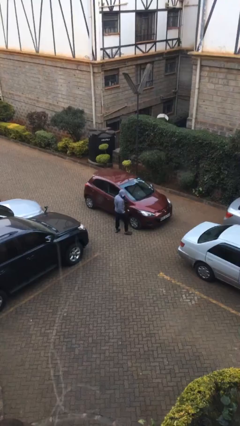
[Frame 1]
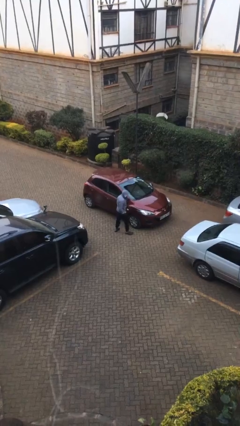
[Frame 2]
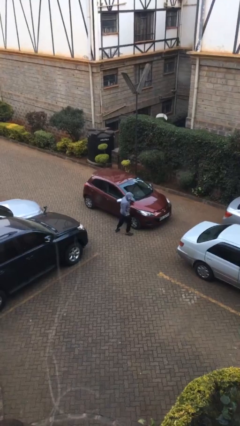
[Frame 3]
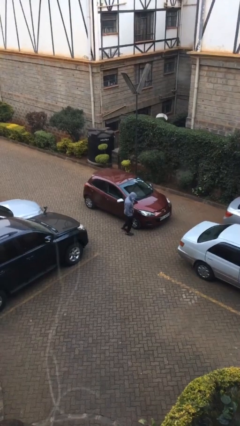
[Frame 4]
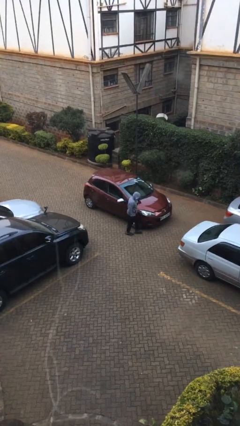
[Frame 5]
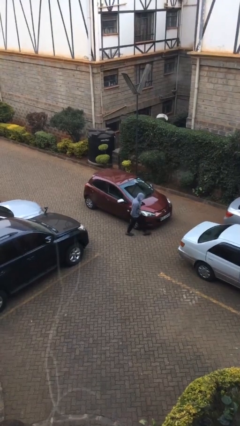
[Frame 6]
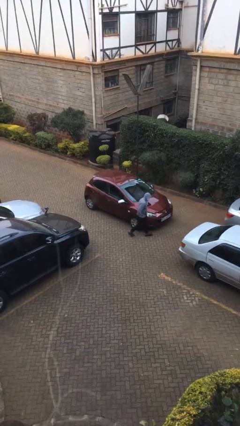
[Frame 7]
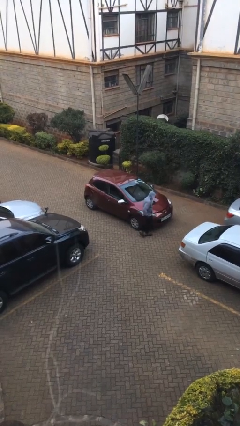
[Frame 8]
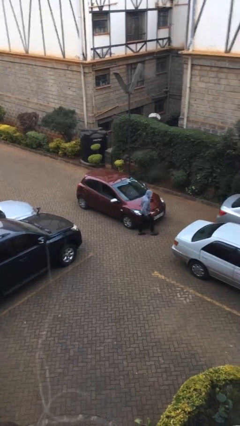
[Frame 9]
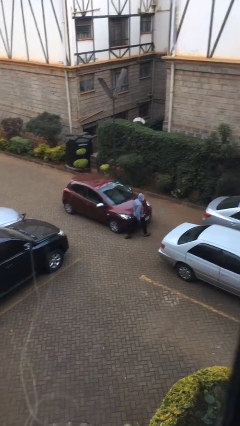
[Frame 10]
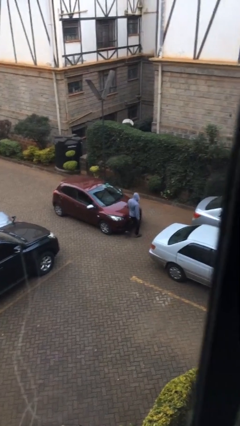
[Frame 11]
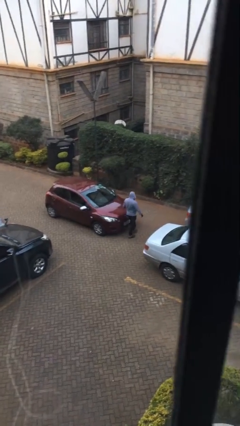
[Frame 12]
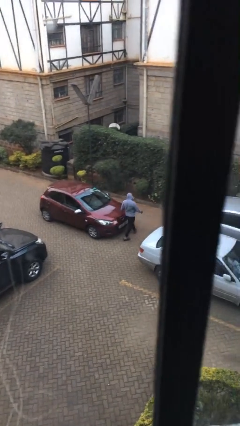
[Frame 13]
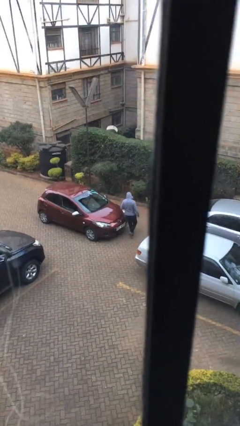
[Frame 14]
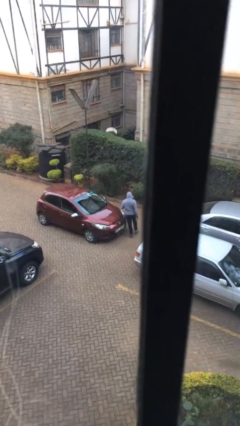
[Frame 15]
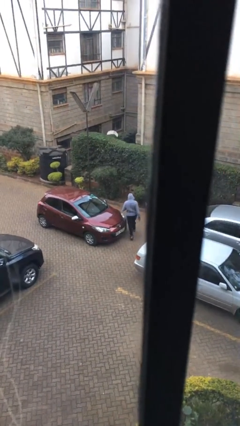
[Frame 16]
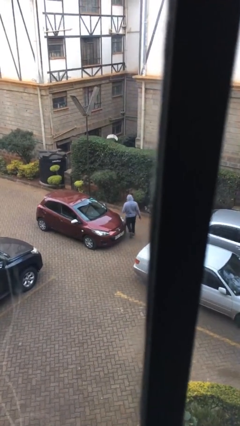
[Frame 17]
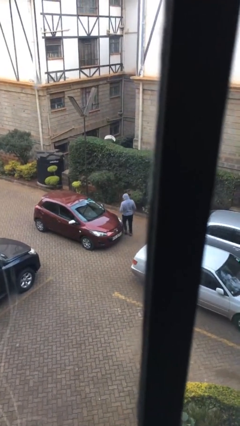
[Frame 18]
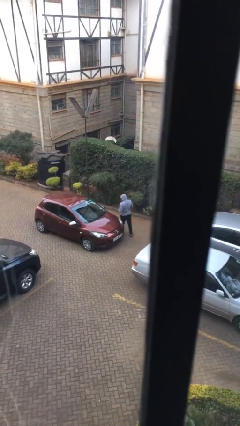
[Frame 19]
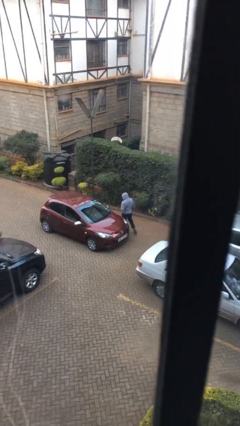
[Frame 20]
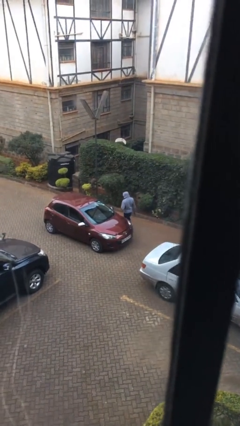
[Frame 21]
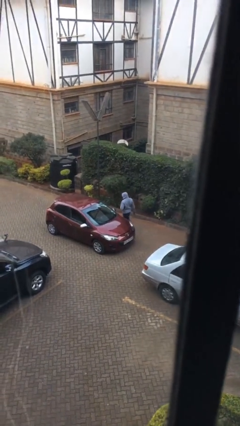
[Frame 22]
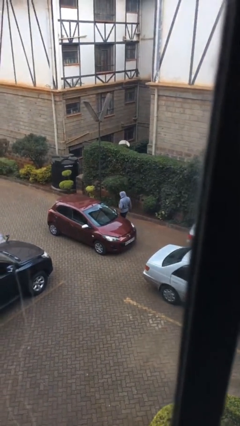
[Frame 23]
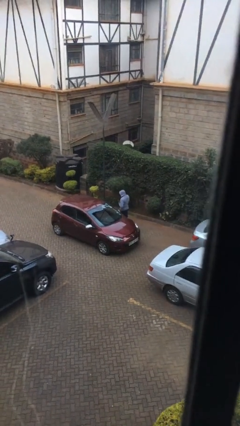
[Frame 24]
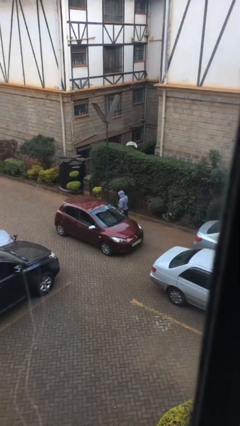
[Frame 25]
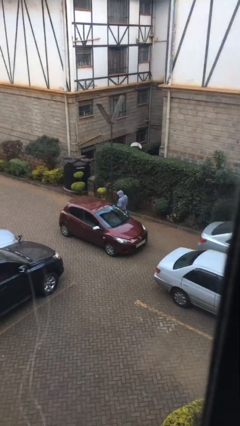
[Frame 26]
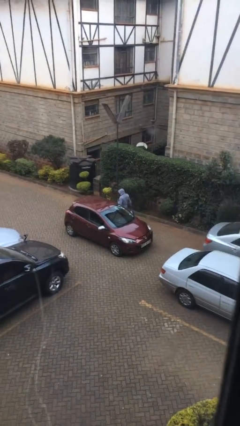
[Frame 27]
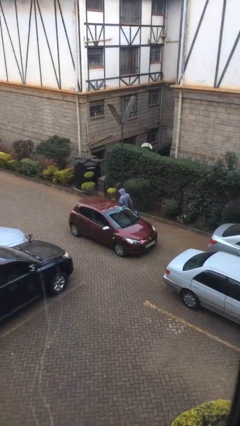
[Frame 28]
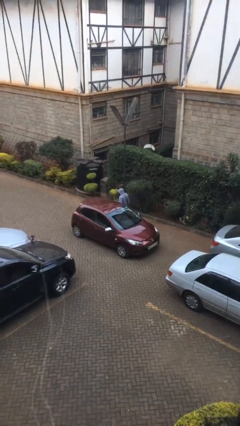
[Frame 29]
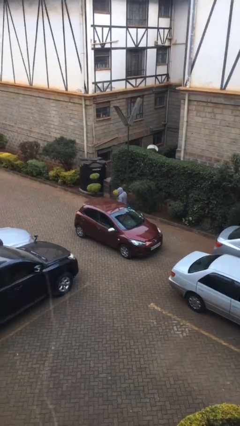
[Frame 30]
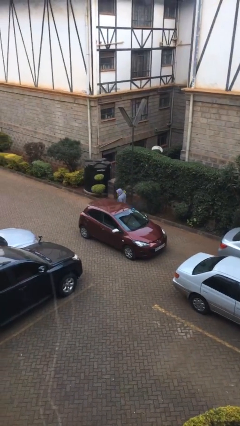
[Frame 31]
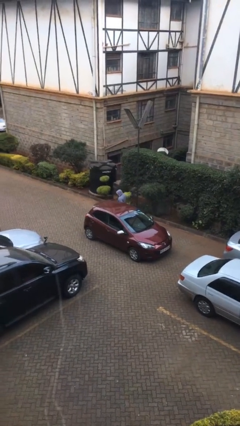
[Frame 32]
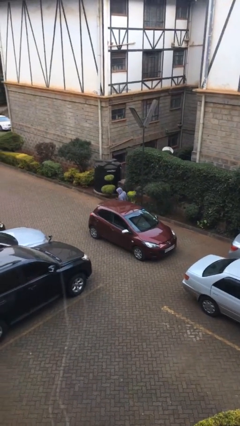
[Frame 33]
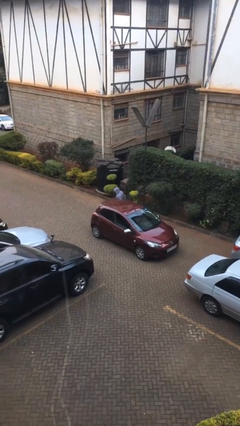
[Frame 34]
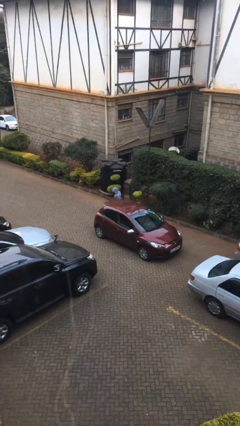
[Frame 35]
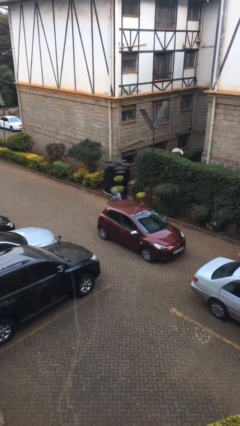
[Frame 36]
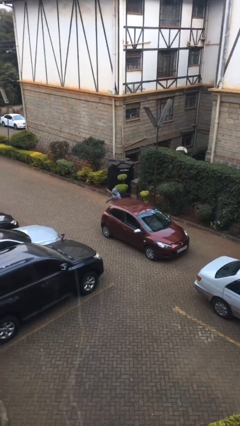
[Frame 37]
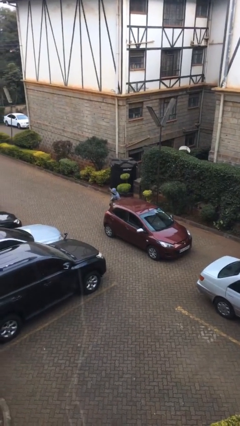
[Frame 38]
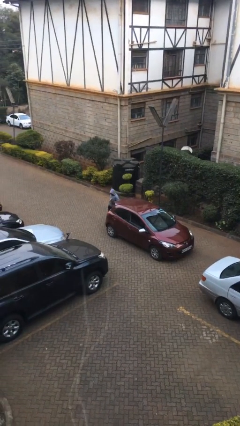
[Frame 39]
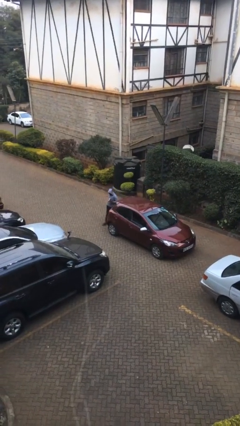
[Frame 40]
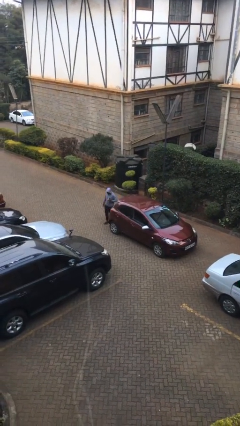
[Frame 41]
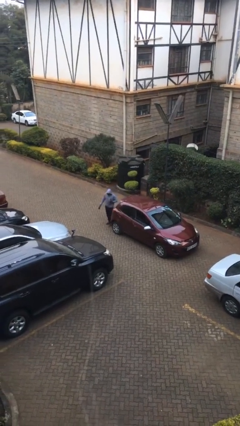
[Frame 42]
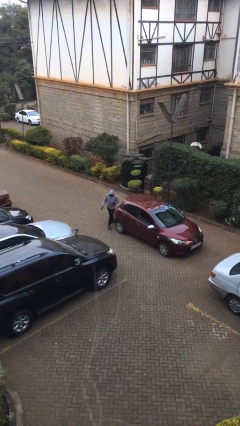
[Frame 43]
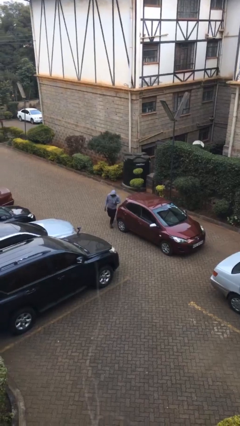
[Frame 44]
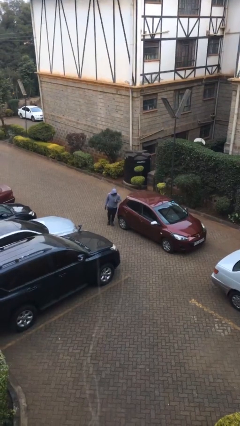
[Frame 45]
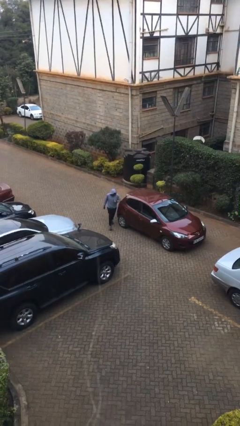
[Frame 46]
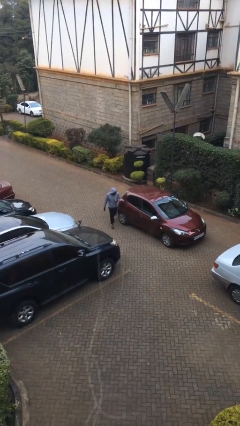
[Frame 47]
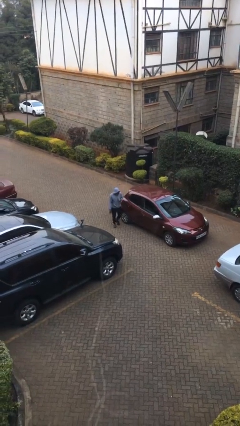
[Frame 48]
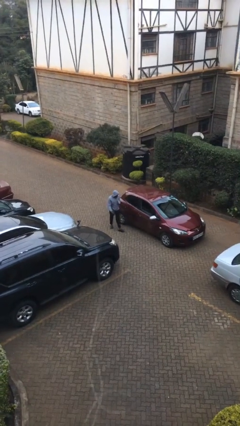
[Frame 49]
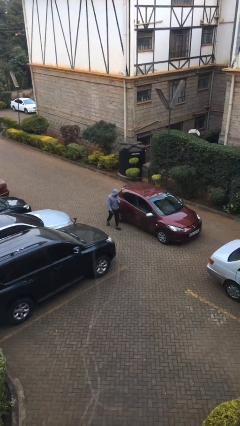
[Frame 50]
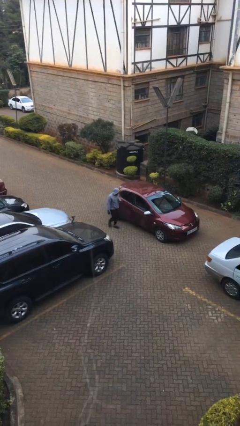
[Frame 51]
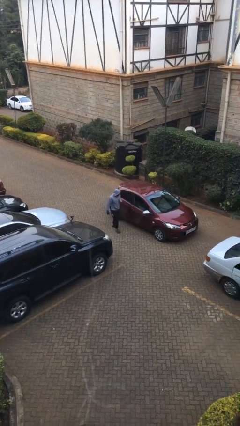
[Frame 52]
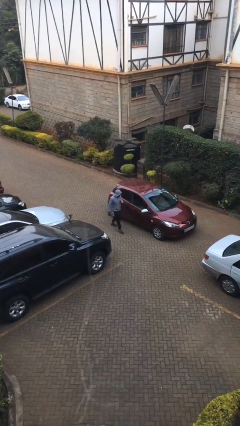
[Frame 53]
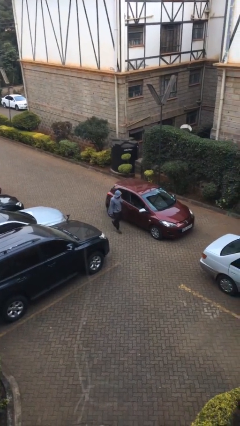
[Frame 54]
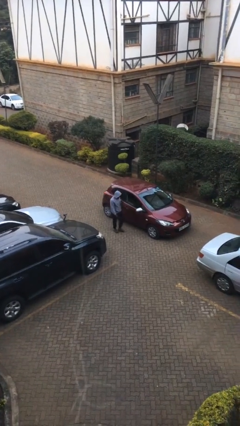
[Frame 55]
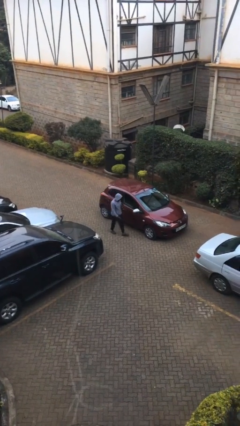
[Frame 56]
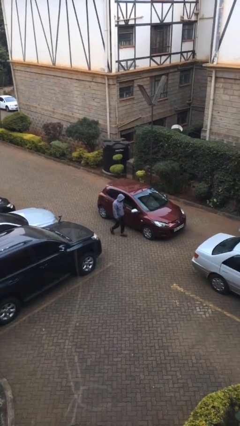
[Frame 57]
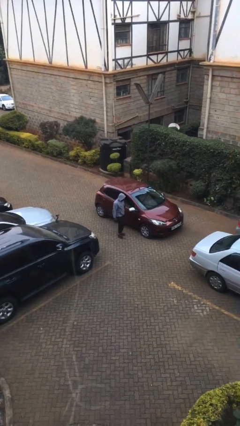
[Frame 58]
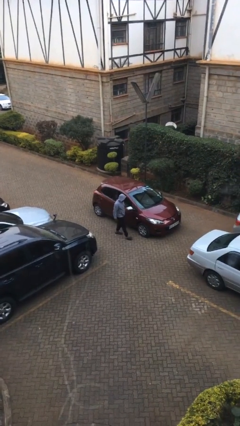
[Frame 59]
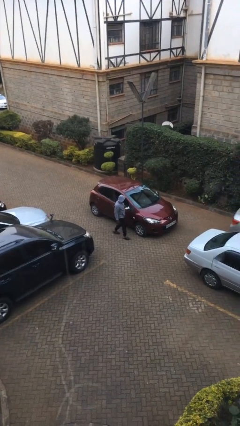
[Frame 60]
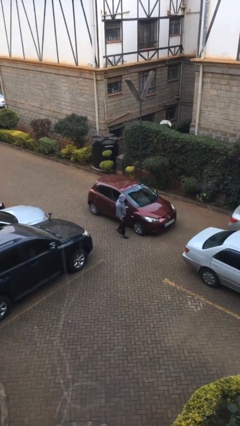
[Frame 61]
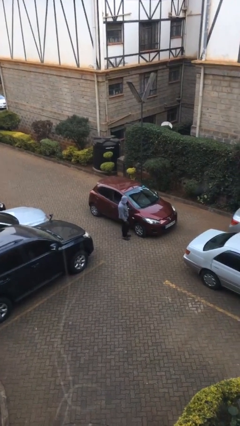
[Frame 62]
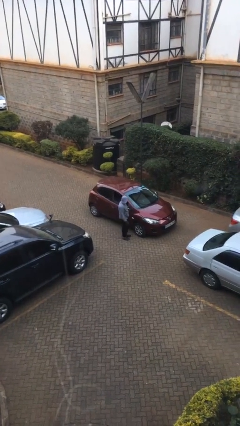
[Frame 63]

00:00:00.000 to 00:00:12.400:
person walks around car

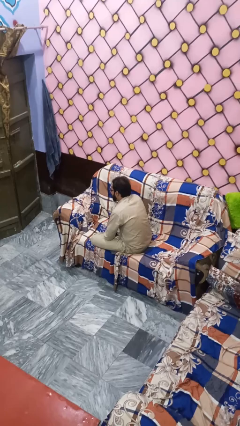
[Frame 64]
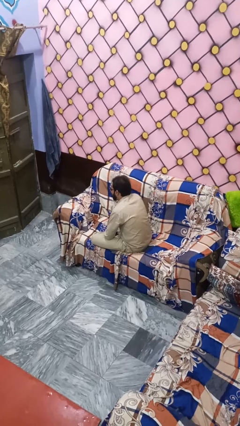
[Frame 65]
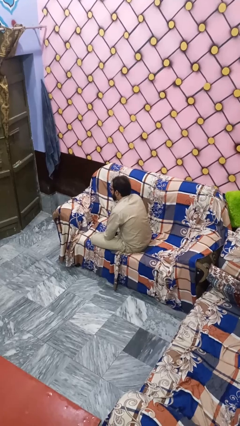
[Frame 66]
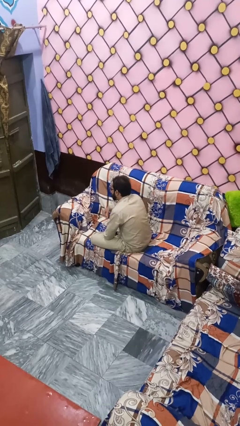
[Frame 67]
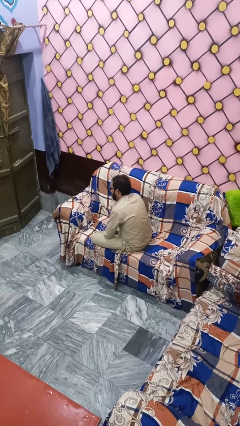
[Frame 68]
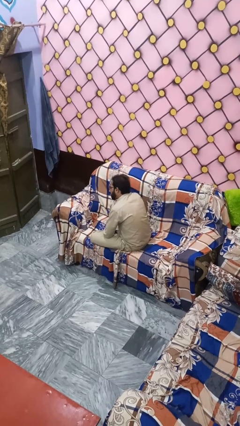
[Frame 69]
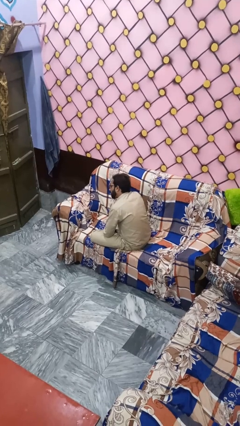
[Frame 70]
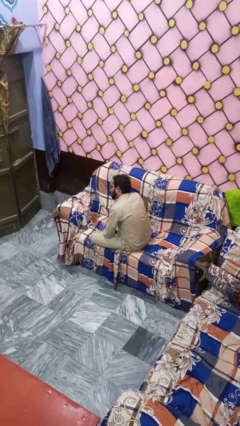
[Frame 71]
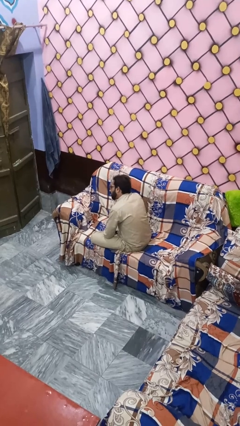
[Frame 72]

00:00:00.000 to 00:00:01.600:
person sticks out tongue

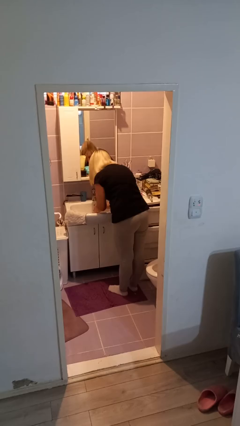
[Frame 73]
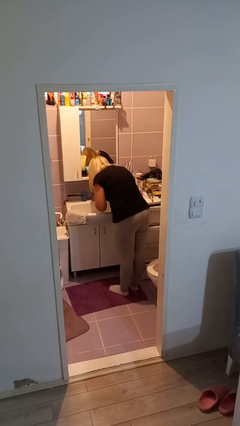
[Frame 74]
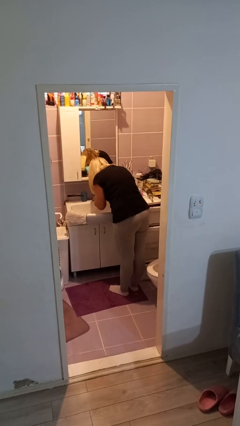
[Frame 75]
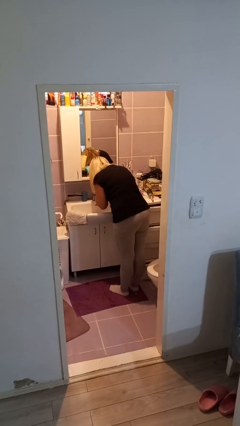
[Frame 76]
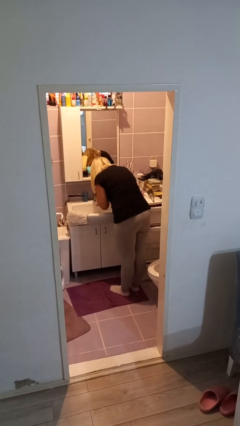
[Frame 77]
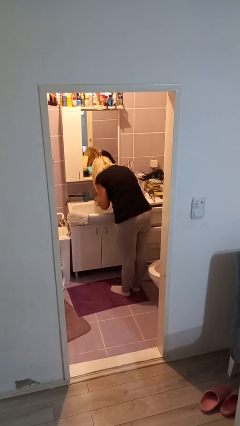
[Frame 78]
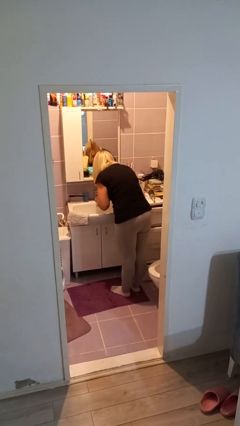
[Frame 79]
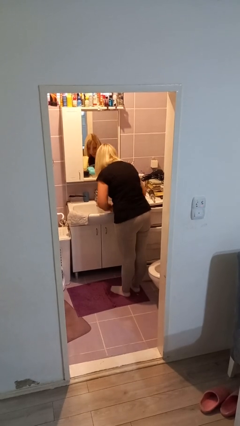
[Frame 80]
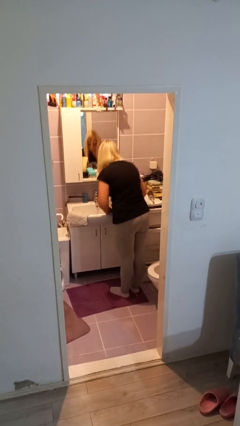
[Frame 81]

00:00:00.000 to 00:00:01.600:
person washes face

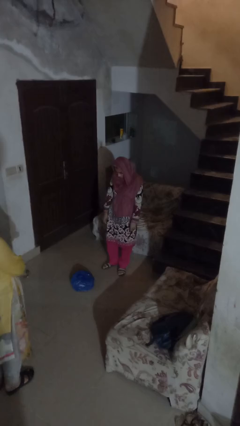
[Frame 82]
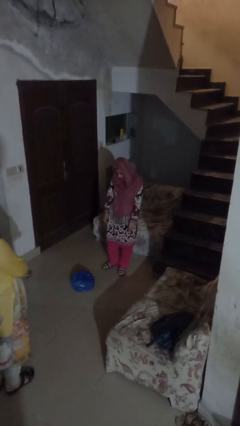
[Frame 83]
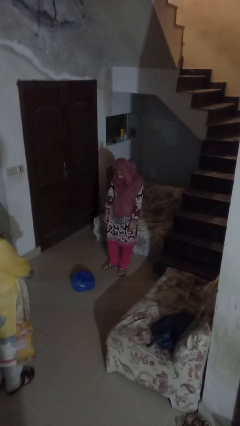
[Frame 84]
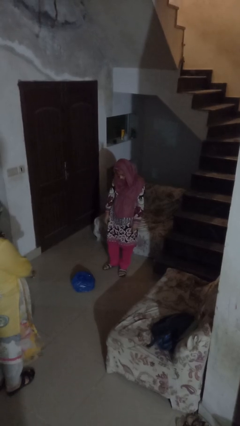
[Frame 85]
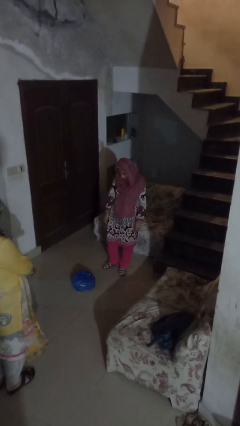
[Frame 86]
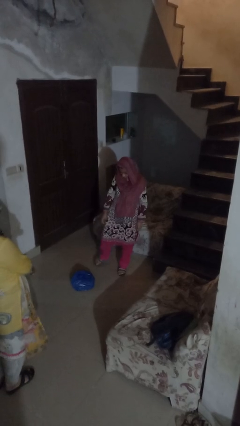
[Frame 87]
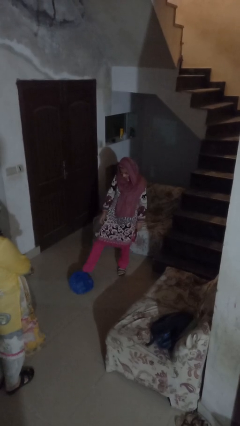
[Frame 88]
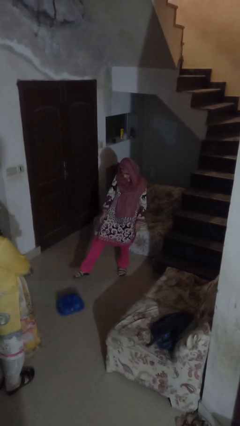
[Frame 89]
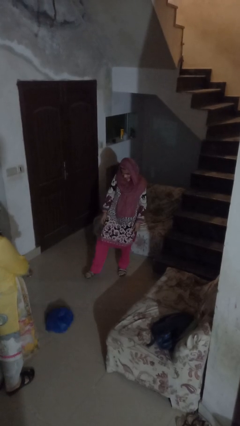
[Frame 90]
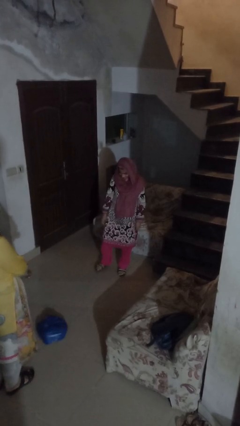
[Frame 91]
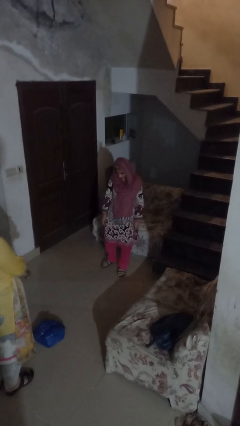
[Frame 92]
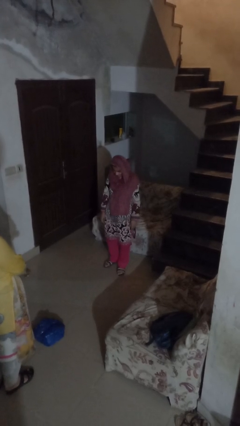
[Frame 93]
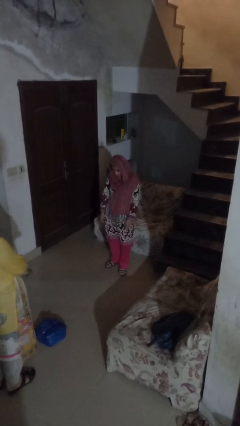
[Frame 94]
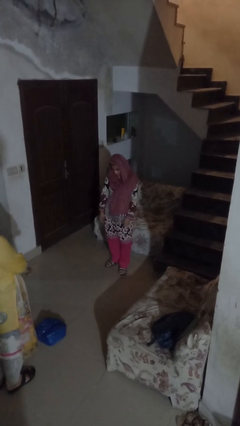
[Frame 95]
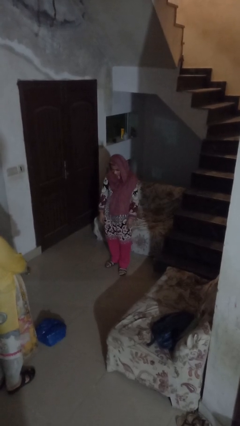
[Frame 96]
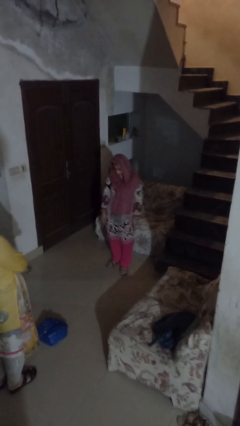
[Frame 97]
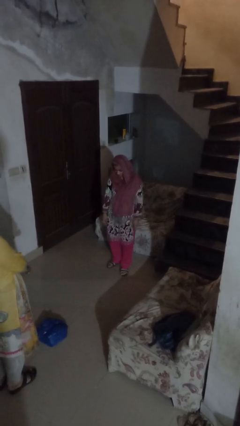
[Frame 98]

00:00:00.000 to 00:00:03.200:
person kicks object to person
